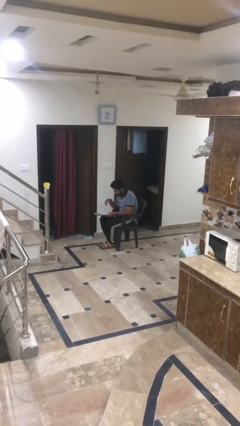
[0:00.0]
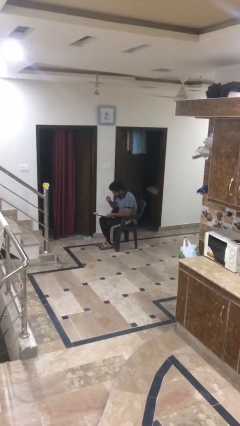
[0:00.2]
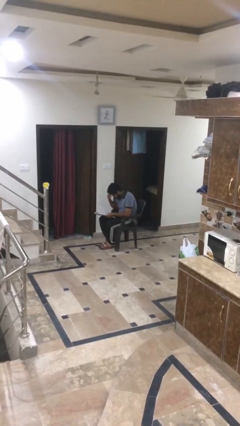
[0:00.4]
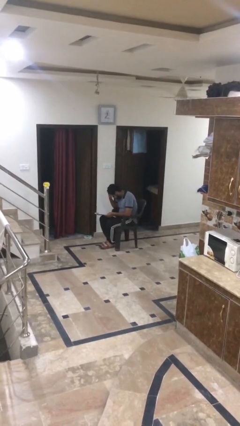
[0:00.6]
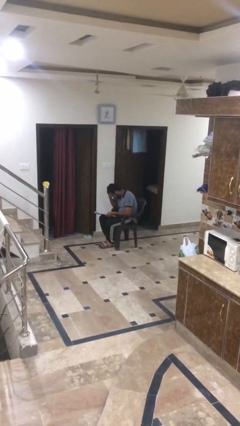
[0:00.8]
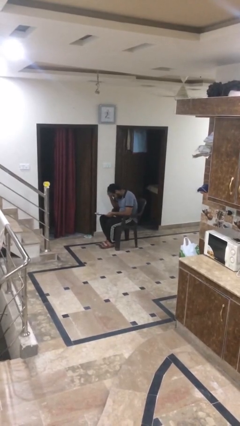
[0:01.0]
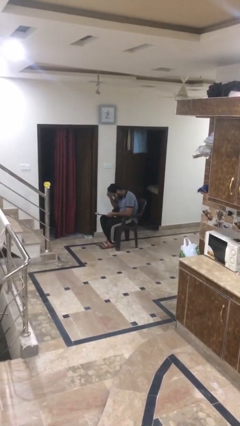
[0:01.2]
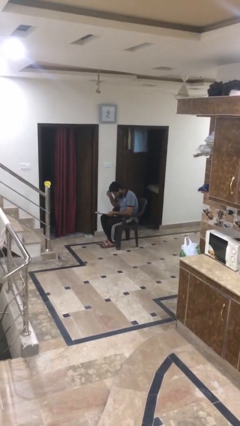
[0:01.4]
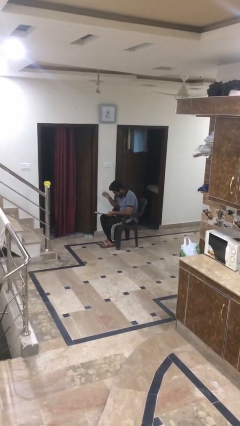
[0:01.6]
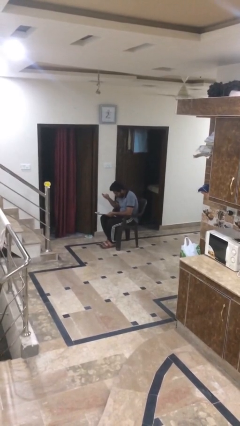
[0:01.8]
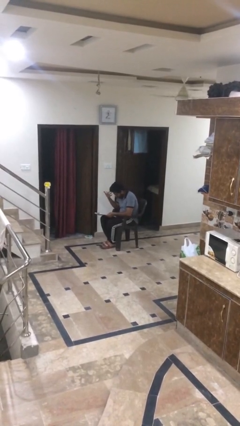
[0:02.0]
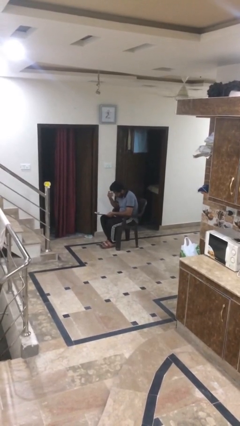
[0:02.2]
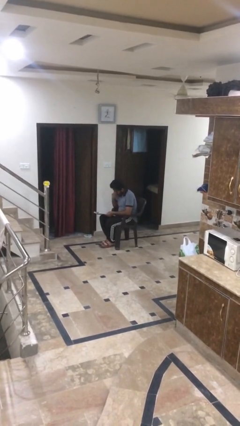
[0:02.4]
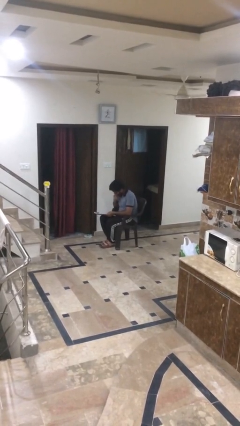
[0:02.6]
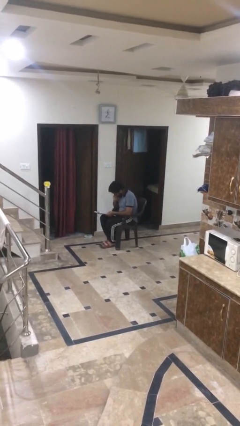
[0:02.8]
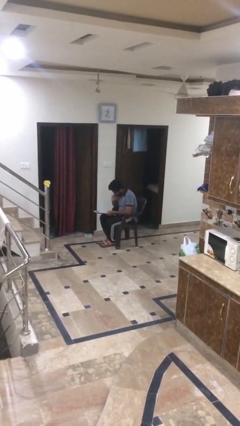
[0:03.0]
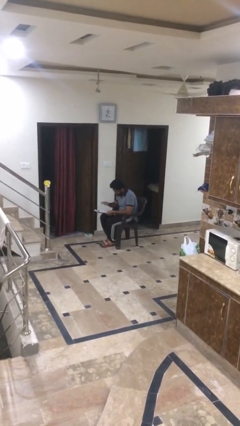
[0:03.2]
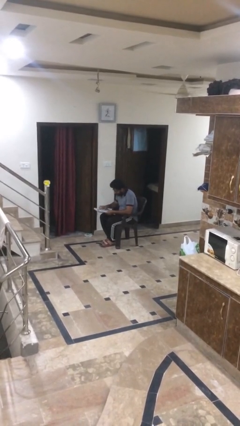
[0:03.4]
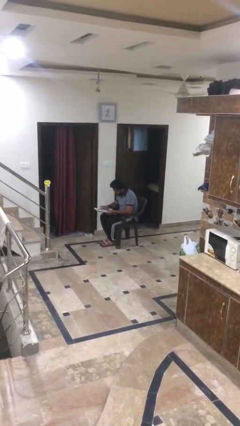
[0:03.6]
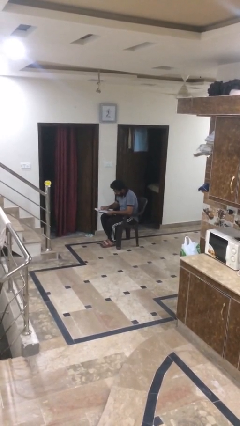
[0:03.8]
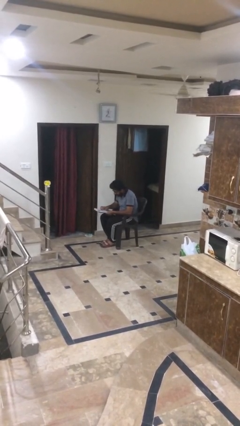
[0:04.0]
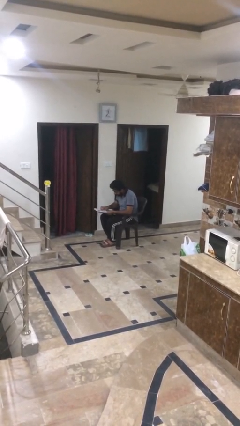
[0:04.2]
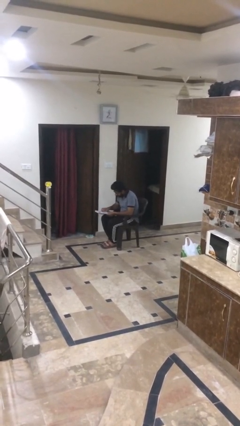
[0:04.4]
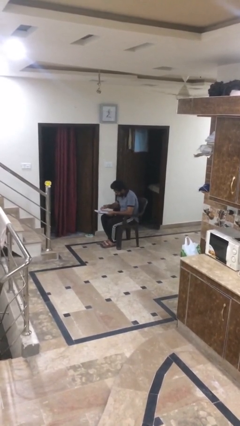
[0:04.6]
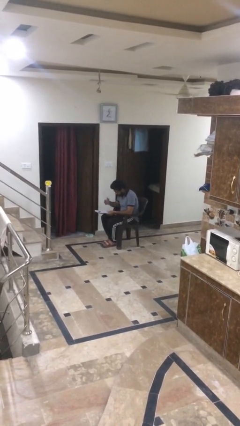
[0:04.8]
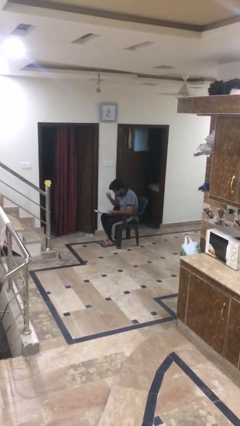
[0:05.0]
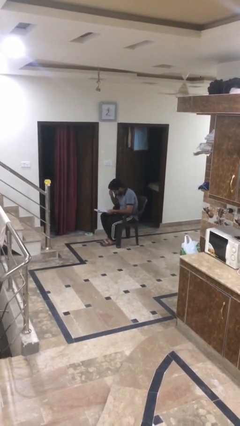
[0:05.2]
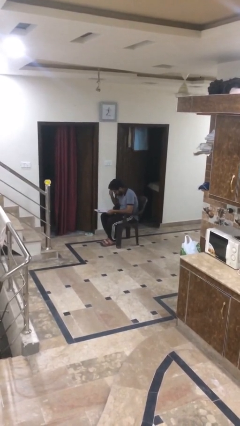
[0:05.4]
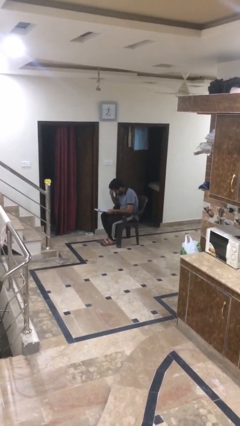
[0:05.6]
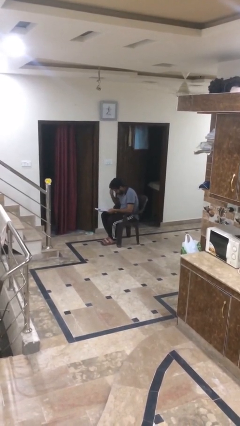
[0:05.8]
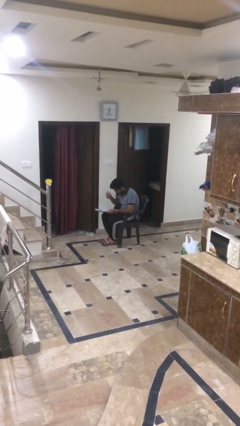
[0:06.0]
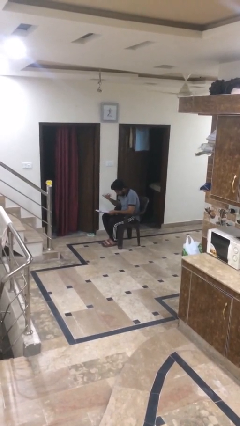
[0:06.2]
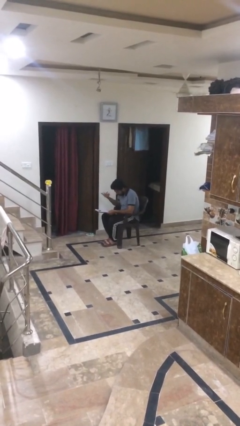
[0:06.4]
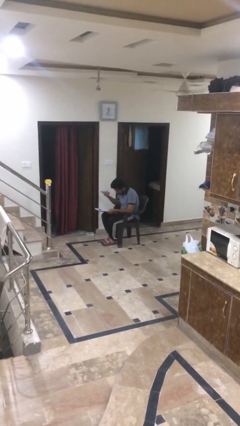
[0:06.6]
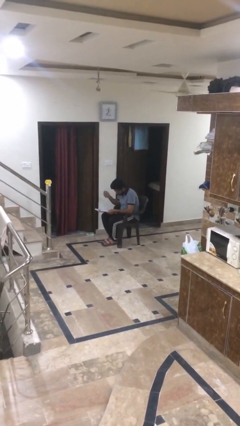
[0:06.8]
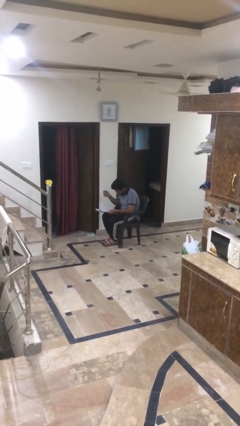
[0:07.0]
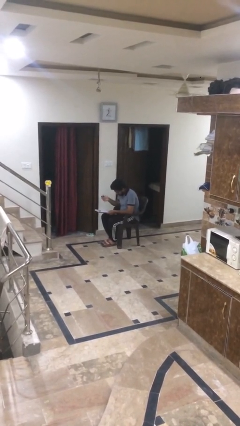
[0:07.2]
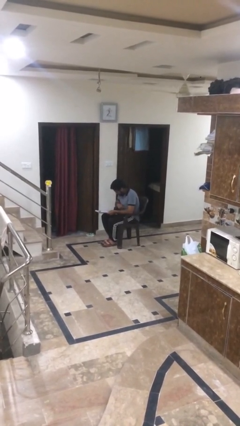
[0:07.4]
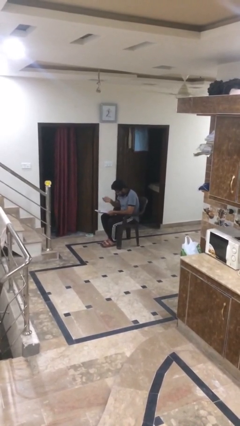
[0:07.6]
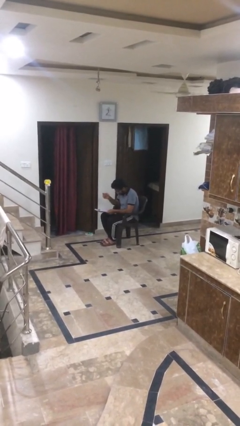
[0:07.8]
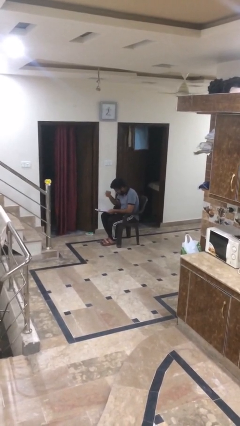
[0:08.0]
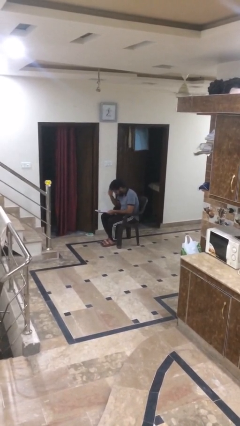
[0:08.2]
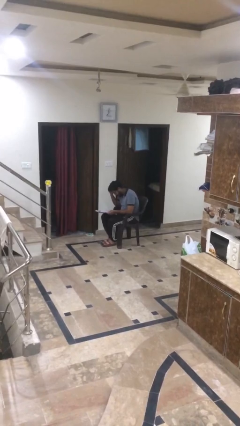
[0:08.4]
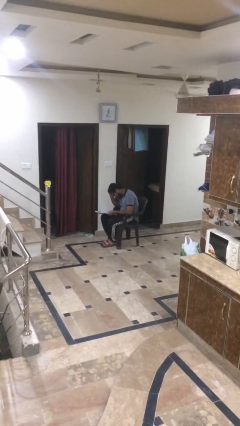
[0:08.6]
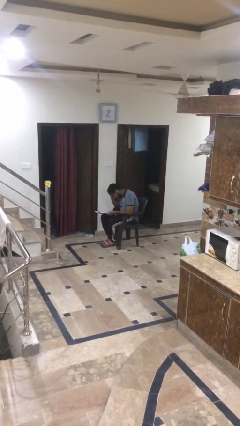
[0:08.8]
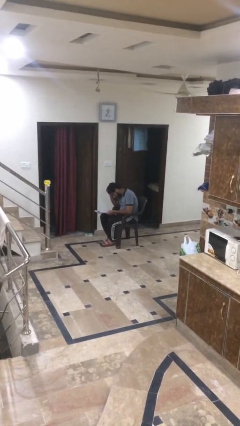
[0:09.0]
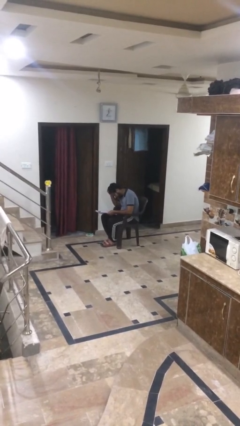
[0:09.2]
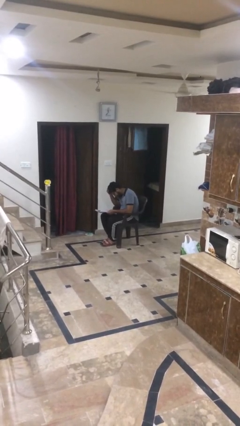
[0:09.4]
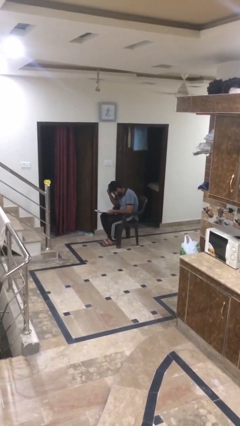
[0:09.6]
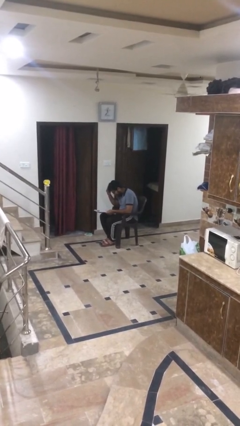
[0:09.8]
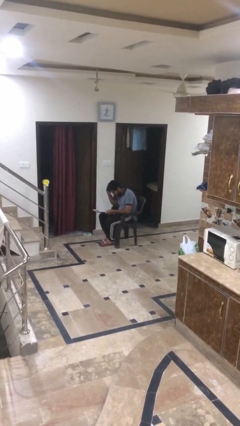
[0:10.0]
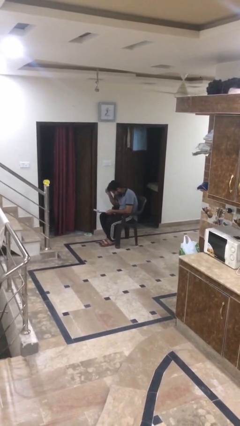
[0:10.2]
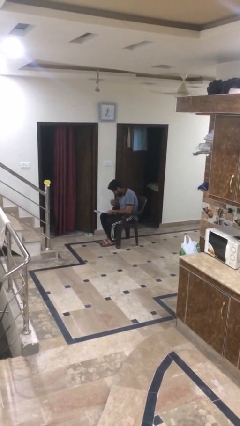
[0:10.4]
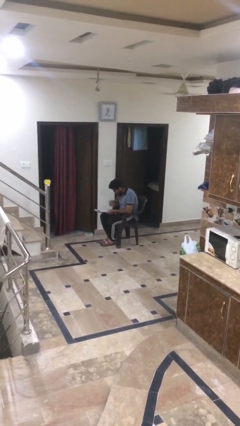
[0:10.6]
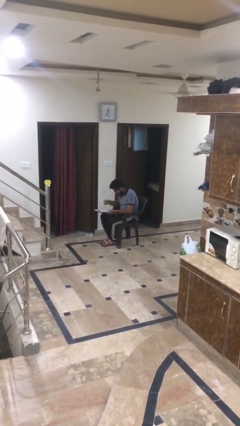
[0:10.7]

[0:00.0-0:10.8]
person reads document

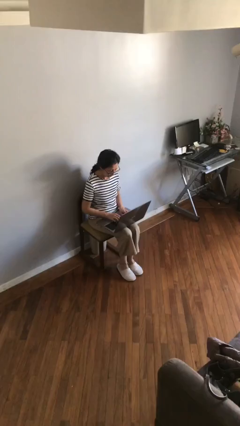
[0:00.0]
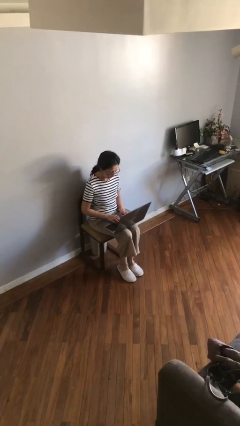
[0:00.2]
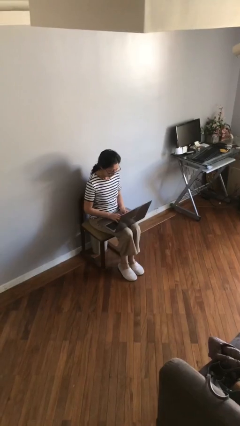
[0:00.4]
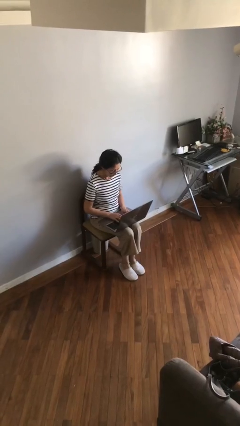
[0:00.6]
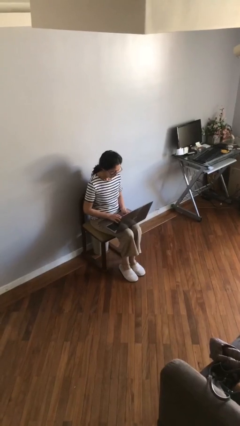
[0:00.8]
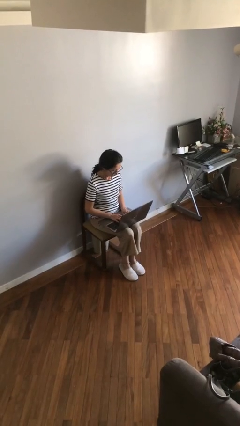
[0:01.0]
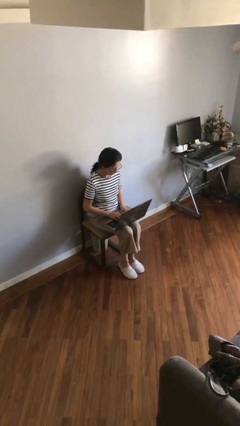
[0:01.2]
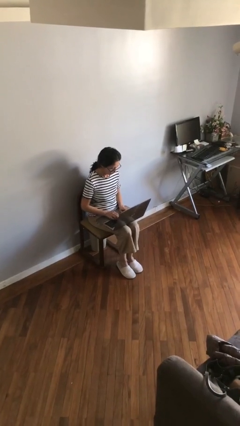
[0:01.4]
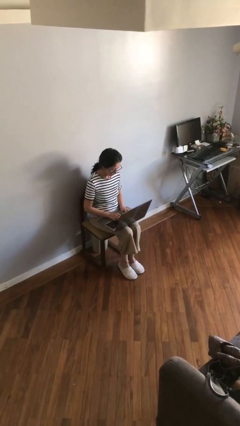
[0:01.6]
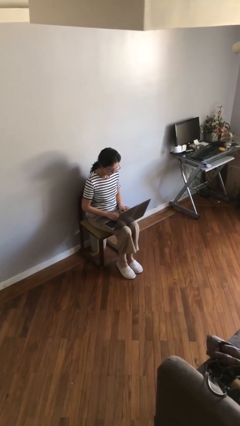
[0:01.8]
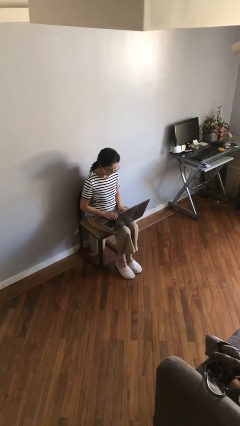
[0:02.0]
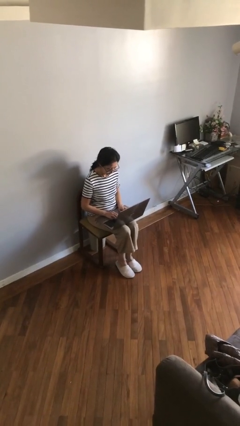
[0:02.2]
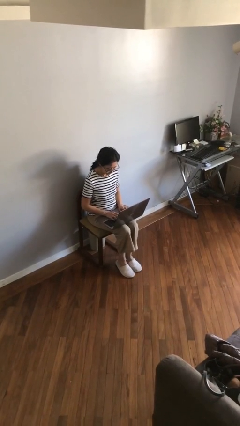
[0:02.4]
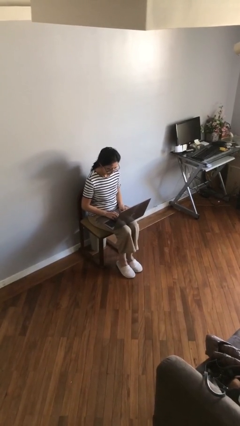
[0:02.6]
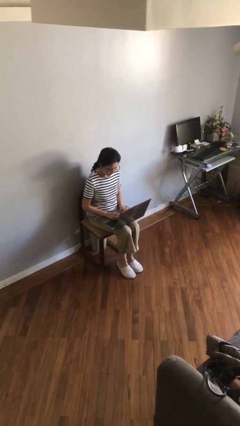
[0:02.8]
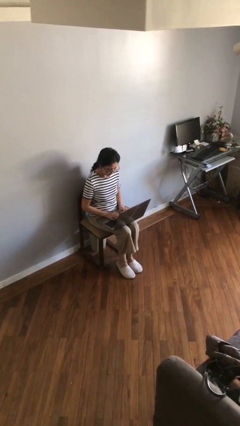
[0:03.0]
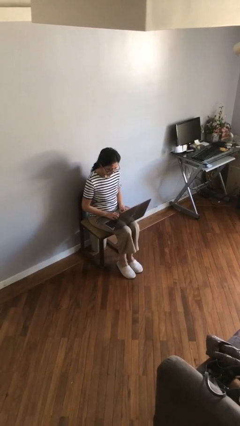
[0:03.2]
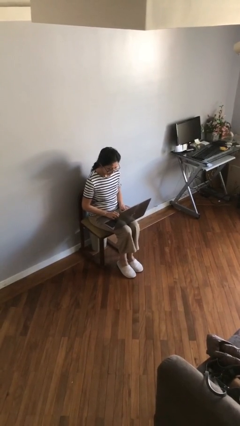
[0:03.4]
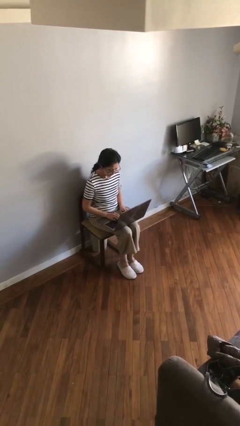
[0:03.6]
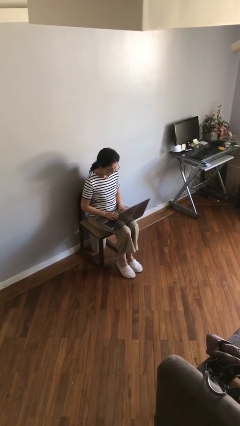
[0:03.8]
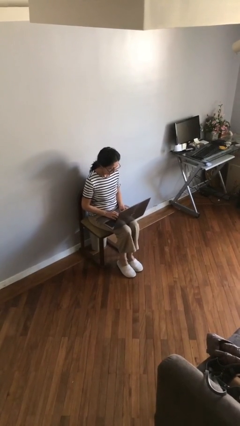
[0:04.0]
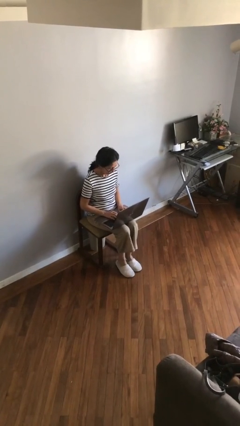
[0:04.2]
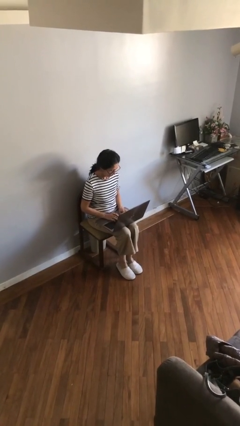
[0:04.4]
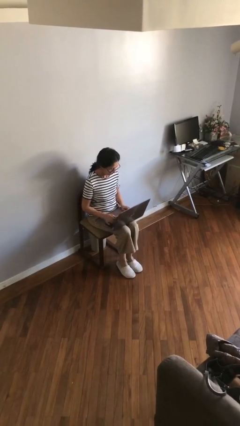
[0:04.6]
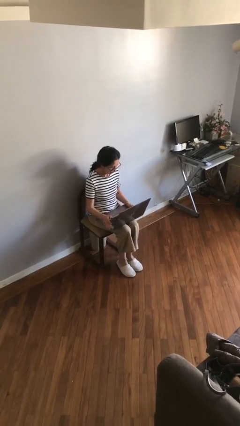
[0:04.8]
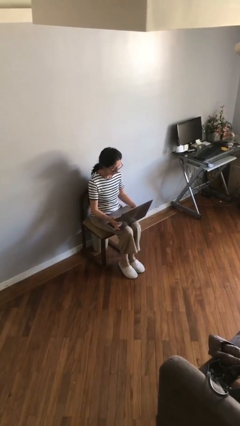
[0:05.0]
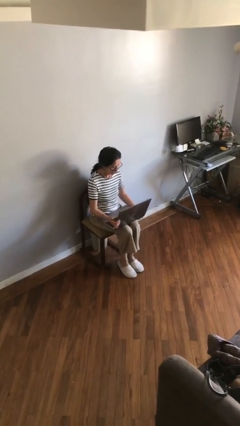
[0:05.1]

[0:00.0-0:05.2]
person interacts with laptop

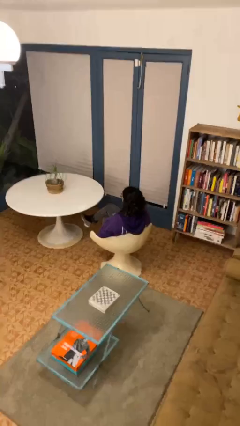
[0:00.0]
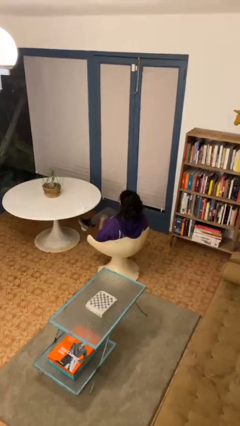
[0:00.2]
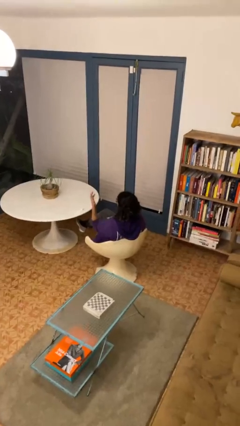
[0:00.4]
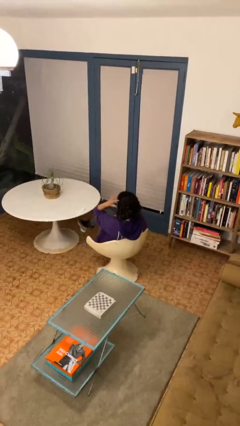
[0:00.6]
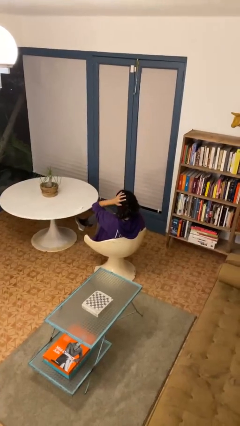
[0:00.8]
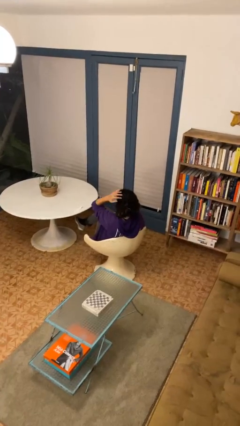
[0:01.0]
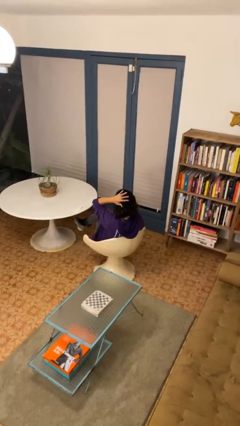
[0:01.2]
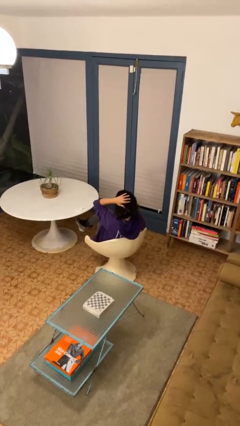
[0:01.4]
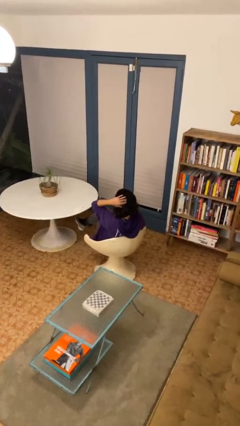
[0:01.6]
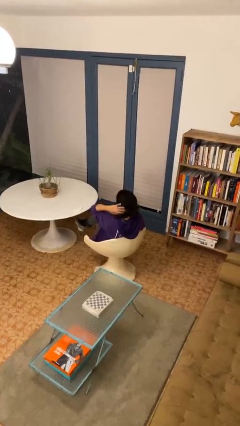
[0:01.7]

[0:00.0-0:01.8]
person pats head
